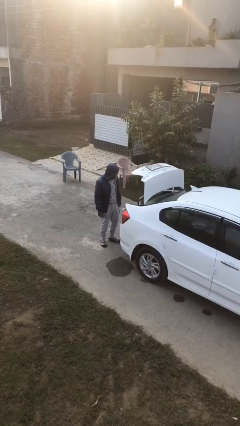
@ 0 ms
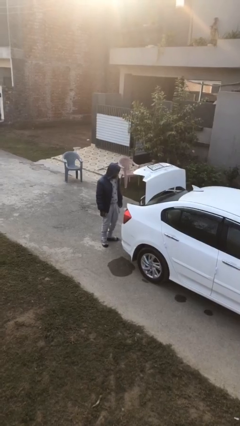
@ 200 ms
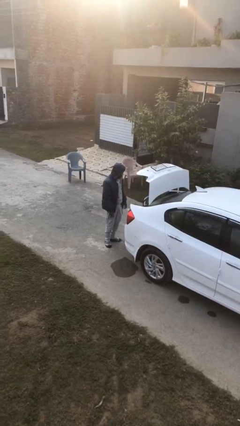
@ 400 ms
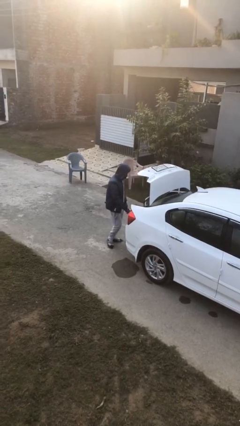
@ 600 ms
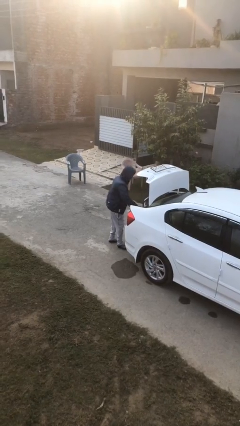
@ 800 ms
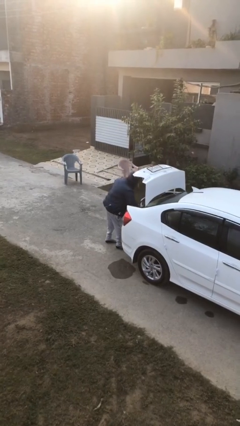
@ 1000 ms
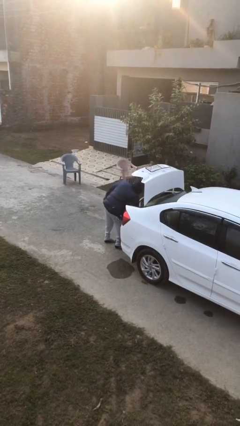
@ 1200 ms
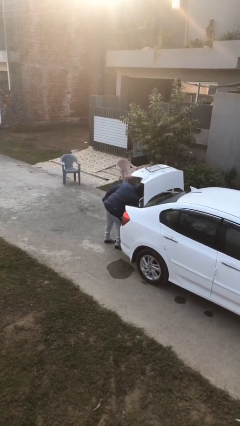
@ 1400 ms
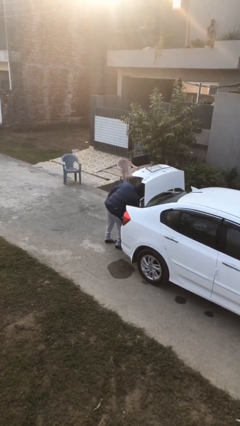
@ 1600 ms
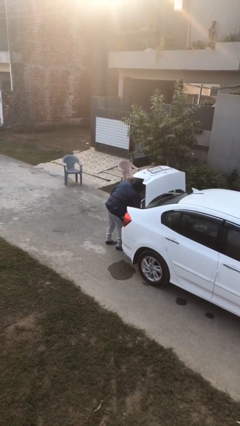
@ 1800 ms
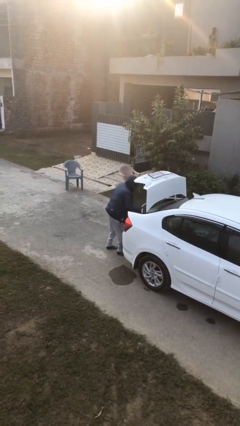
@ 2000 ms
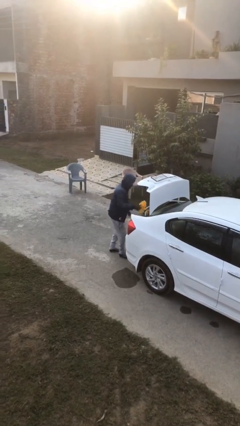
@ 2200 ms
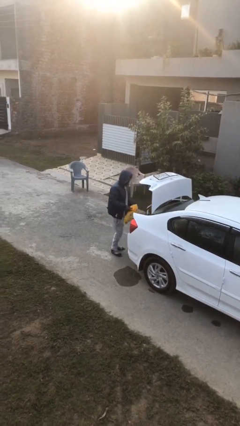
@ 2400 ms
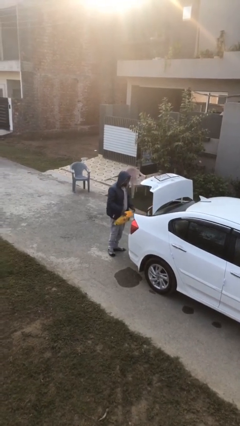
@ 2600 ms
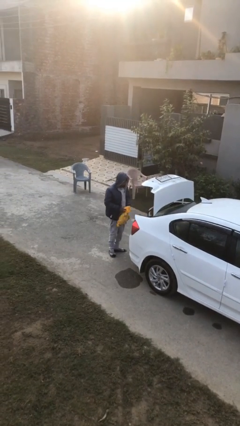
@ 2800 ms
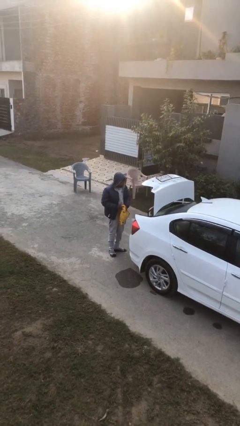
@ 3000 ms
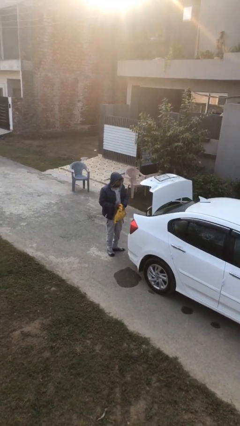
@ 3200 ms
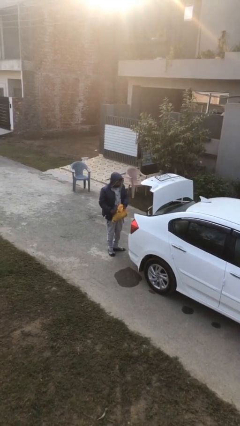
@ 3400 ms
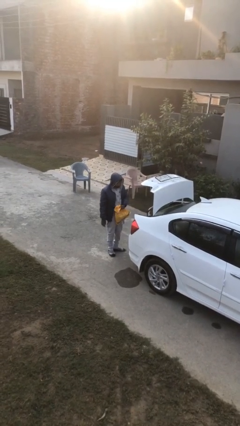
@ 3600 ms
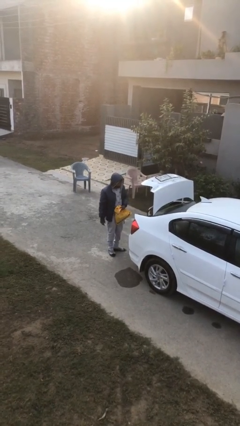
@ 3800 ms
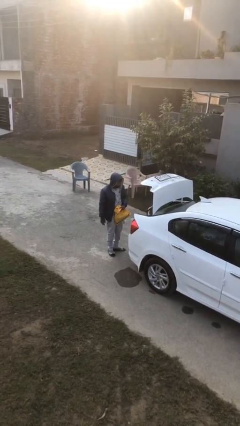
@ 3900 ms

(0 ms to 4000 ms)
person unloads car

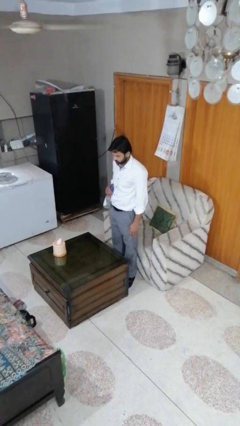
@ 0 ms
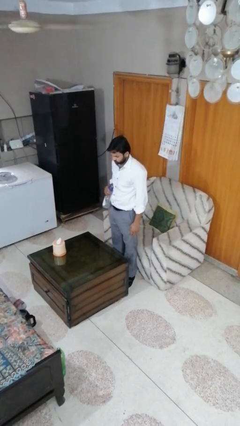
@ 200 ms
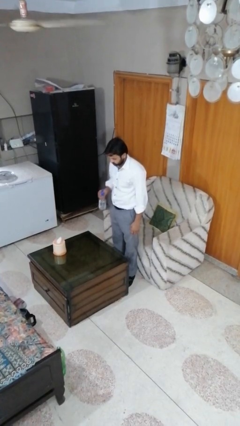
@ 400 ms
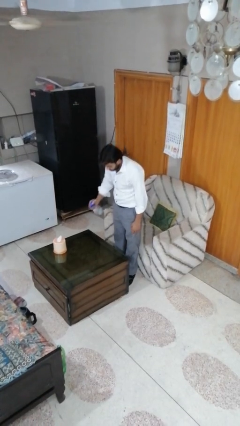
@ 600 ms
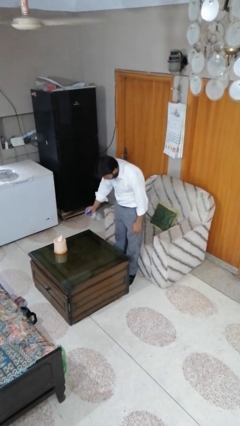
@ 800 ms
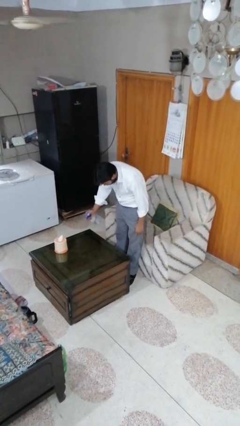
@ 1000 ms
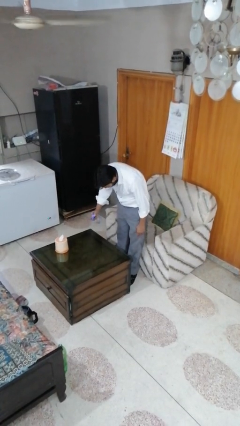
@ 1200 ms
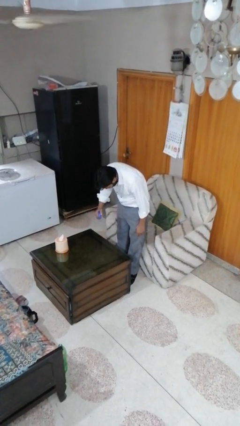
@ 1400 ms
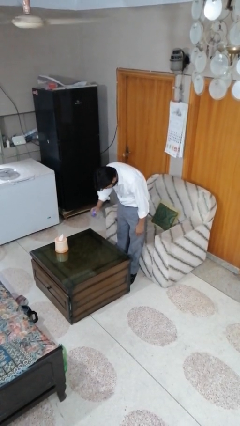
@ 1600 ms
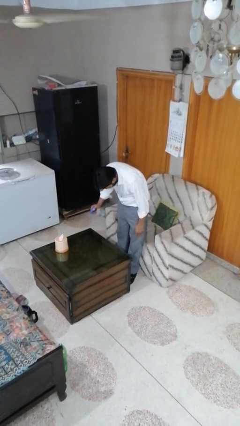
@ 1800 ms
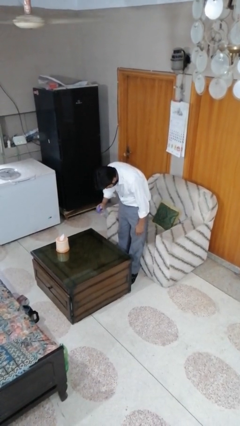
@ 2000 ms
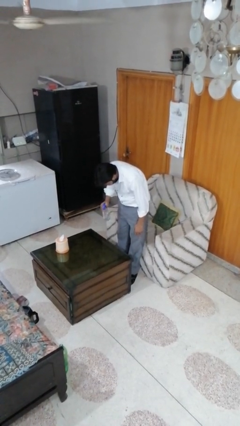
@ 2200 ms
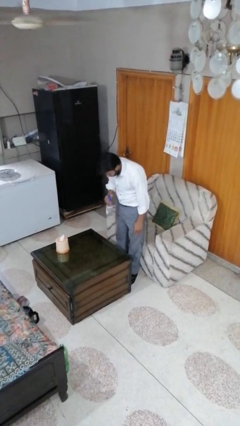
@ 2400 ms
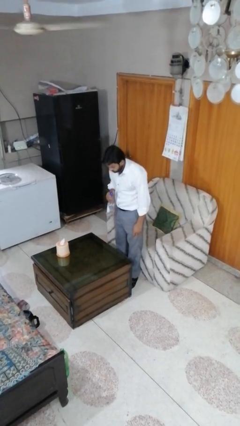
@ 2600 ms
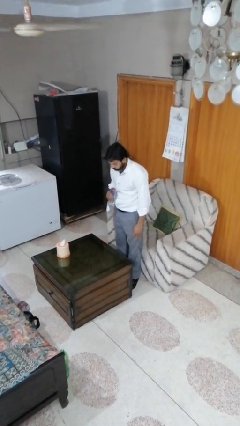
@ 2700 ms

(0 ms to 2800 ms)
person sprays from bottle

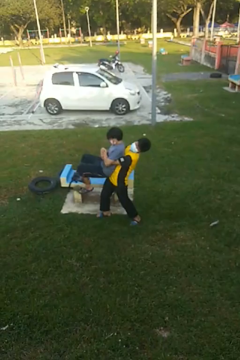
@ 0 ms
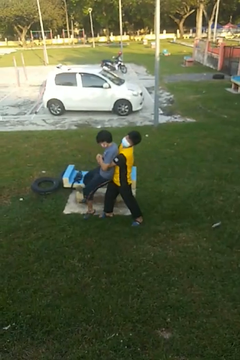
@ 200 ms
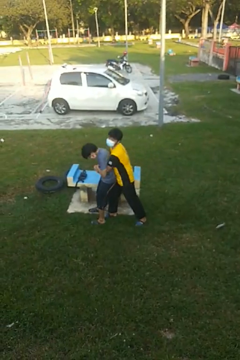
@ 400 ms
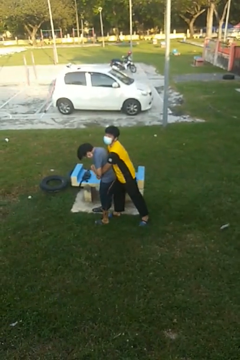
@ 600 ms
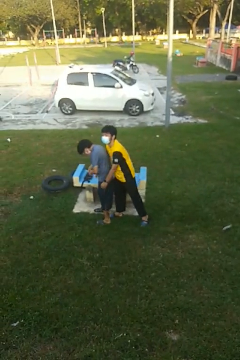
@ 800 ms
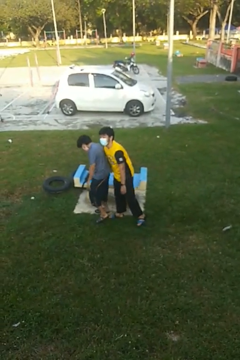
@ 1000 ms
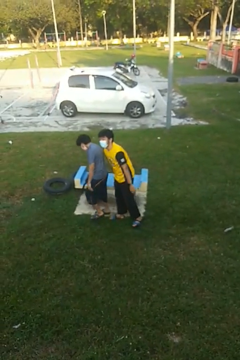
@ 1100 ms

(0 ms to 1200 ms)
person puts down person

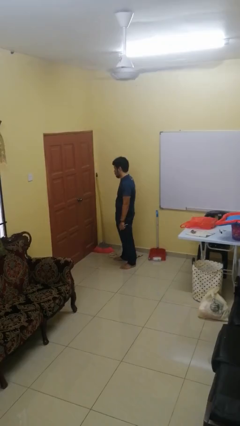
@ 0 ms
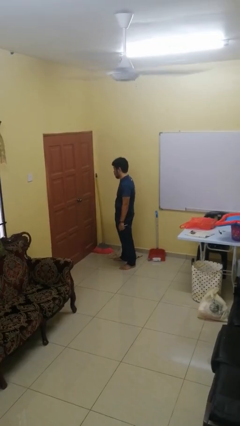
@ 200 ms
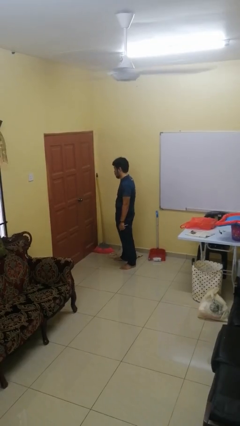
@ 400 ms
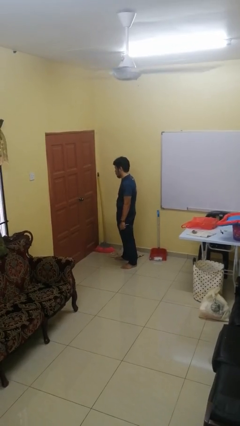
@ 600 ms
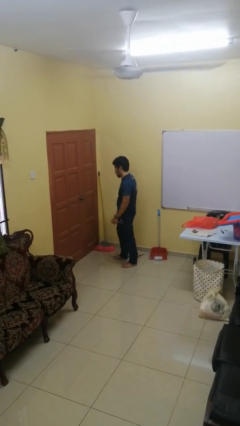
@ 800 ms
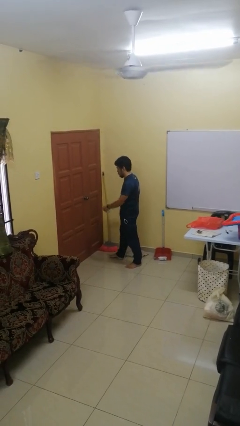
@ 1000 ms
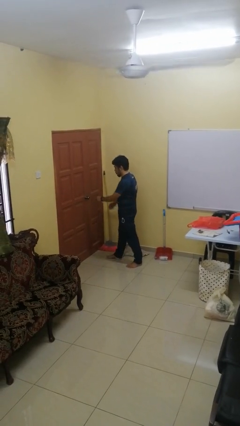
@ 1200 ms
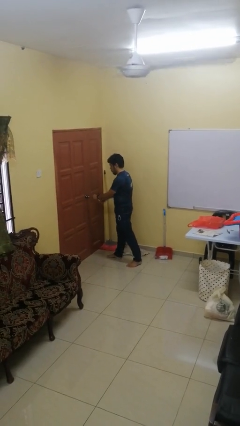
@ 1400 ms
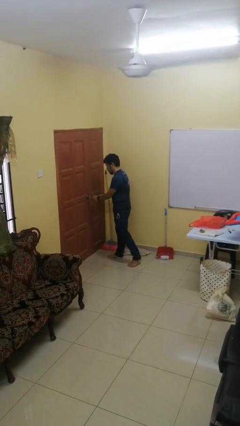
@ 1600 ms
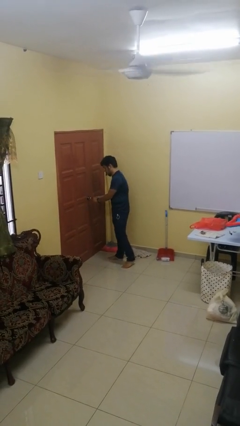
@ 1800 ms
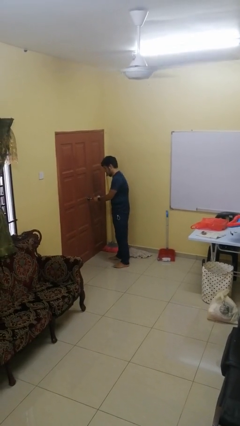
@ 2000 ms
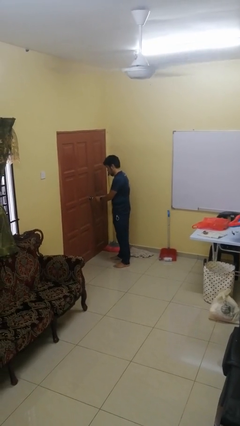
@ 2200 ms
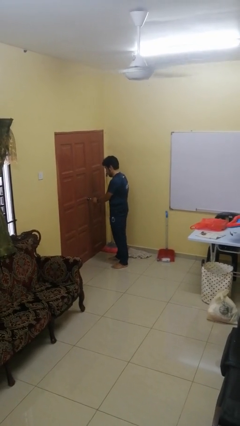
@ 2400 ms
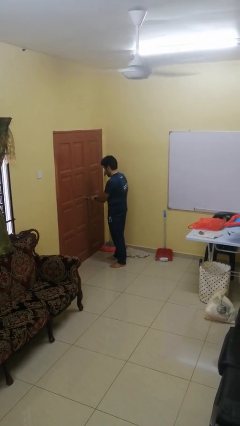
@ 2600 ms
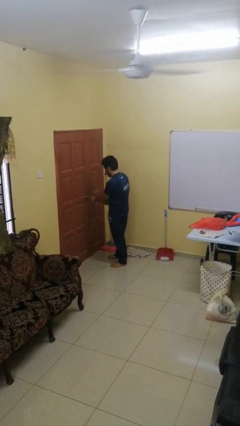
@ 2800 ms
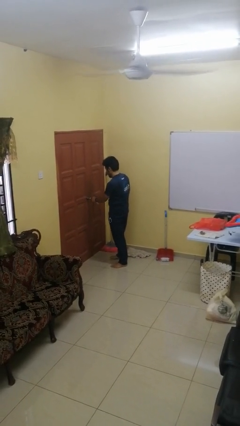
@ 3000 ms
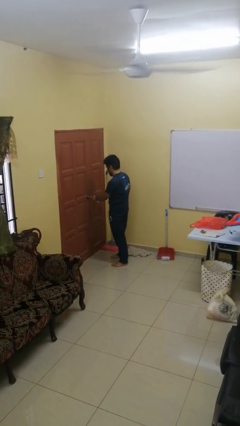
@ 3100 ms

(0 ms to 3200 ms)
person unlocks door with keys

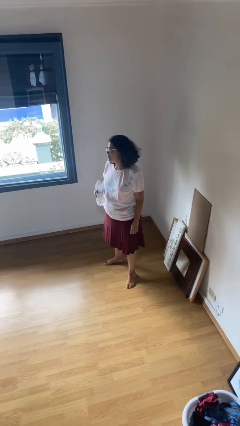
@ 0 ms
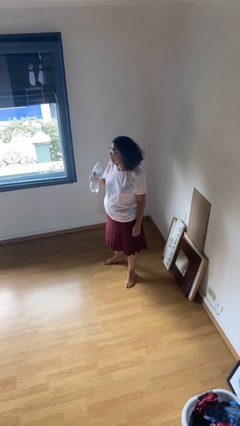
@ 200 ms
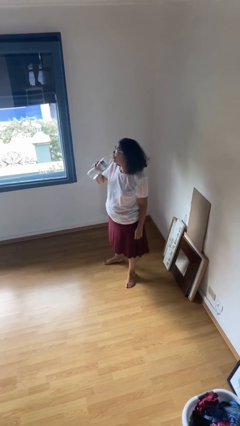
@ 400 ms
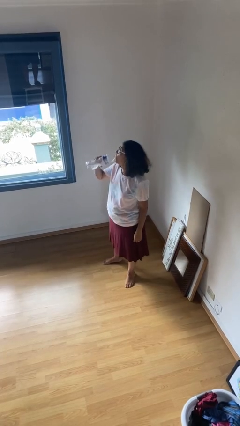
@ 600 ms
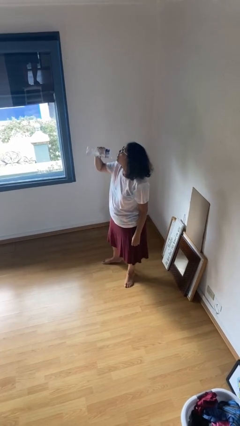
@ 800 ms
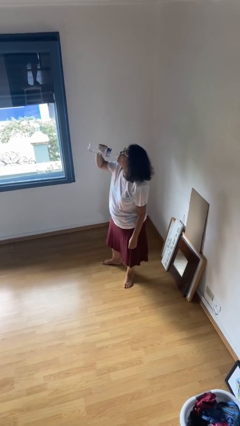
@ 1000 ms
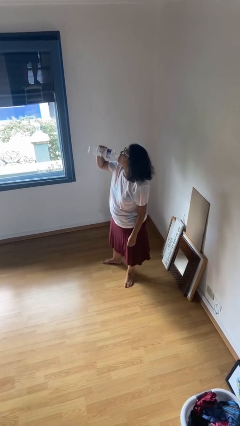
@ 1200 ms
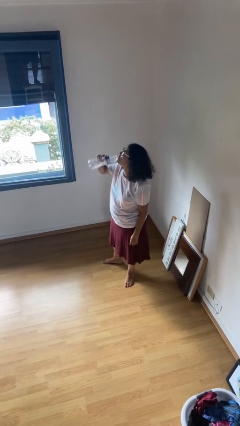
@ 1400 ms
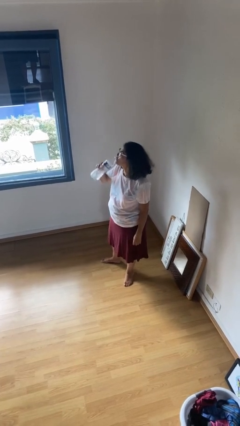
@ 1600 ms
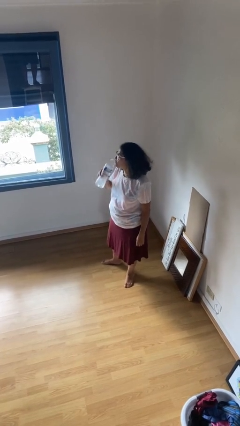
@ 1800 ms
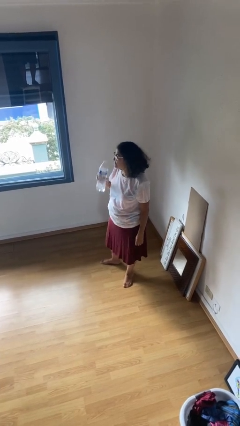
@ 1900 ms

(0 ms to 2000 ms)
person drinks from bottle

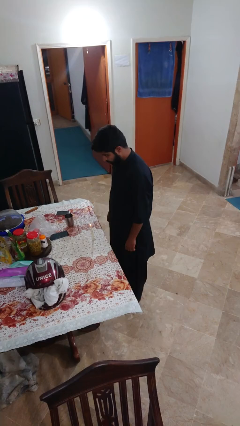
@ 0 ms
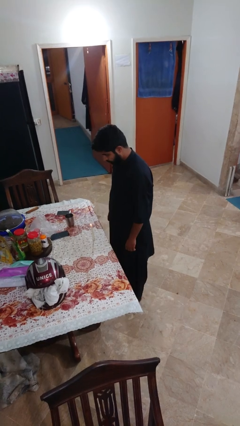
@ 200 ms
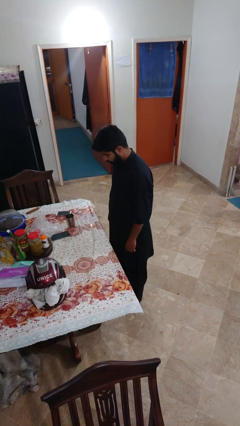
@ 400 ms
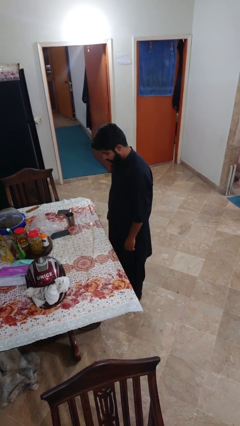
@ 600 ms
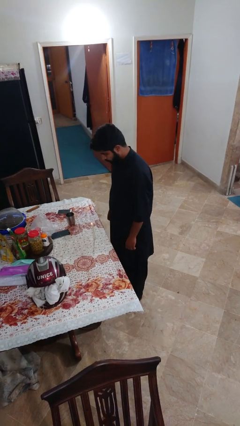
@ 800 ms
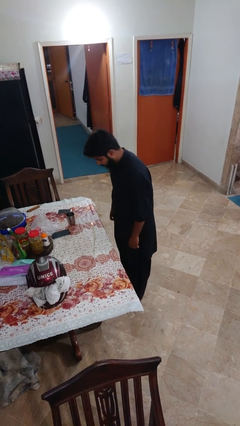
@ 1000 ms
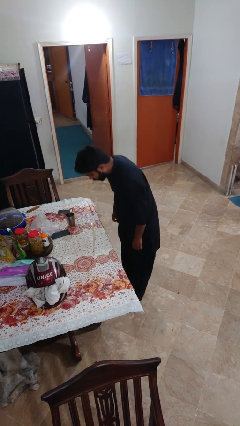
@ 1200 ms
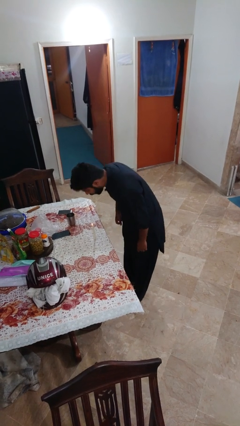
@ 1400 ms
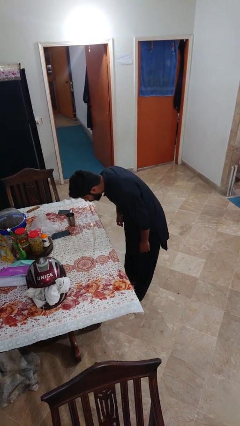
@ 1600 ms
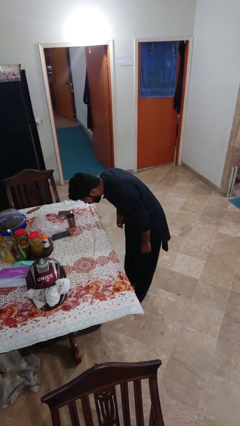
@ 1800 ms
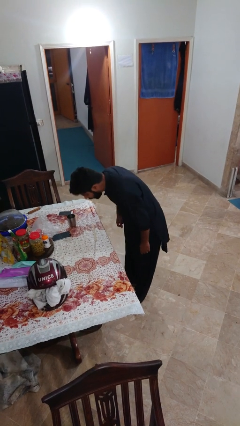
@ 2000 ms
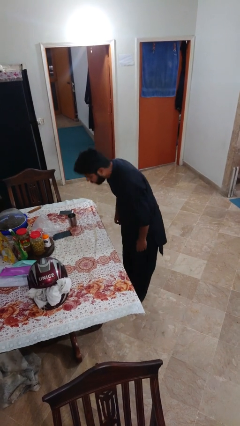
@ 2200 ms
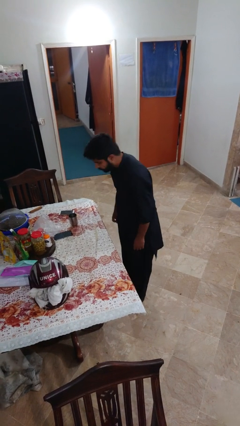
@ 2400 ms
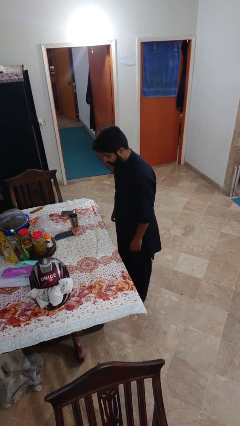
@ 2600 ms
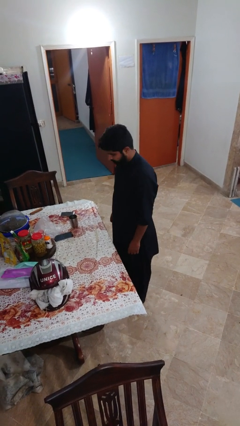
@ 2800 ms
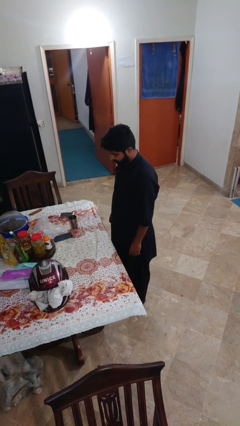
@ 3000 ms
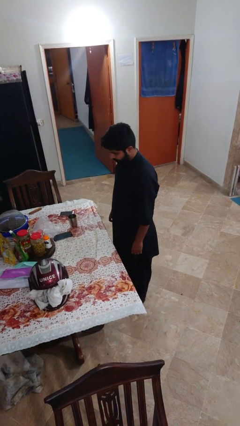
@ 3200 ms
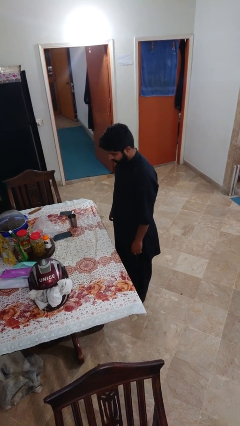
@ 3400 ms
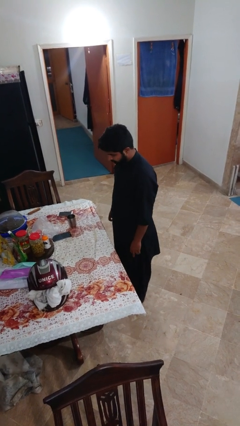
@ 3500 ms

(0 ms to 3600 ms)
person extinguishes candle

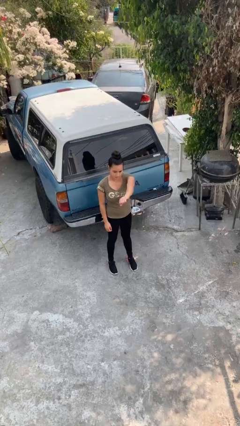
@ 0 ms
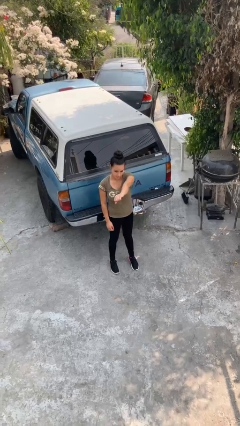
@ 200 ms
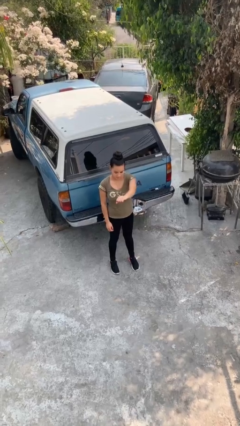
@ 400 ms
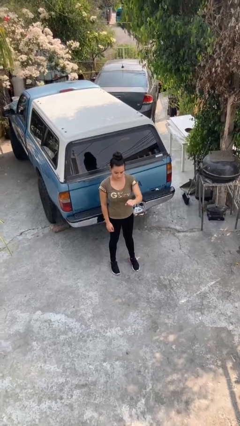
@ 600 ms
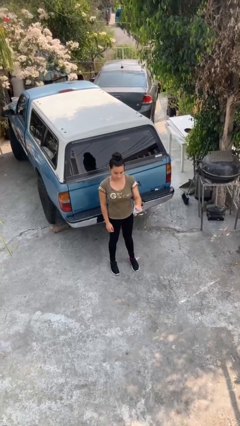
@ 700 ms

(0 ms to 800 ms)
person punches
